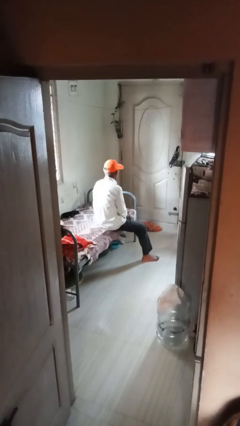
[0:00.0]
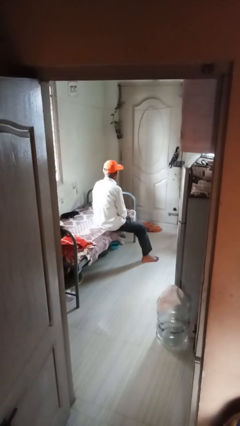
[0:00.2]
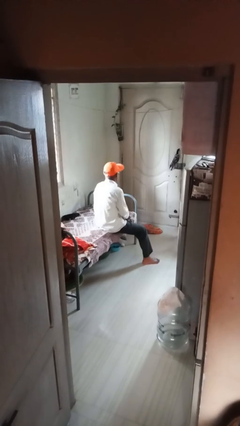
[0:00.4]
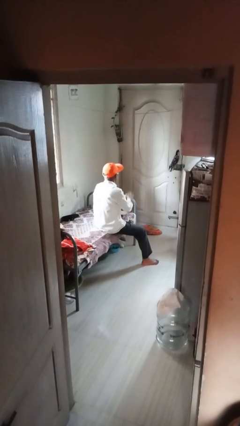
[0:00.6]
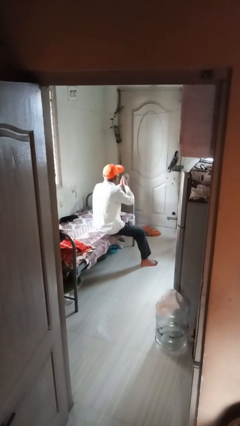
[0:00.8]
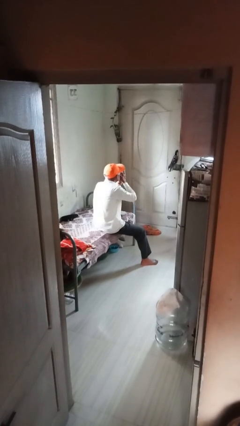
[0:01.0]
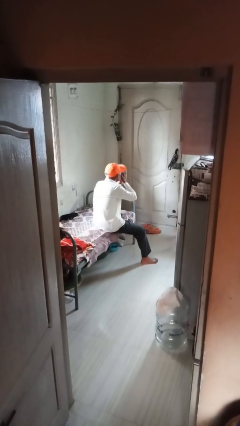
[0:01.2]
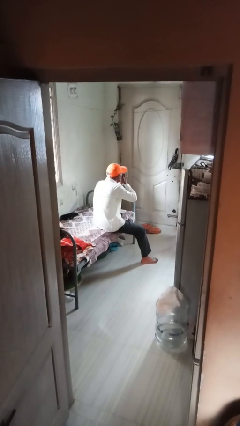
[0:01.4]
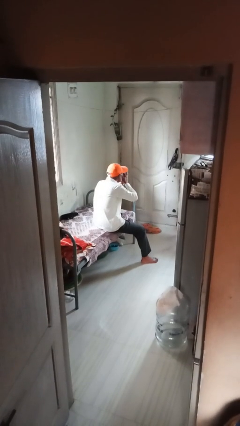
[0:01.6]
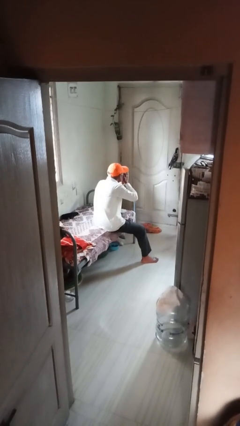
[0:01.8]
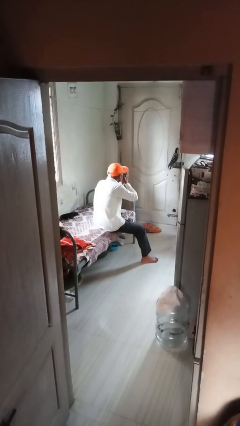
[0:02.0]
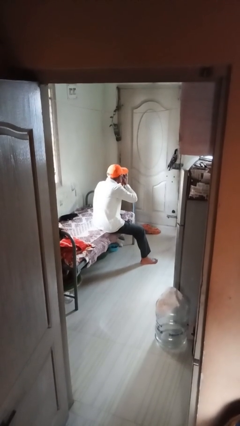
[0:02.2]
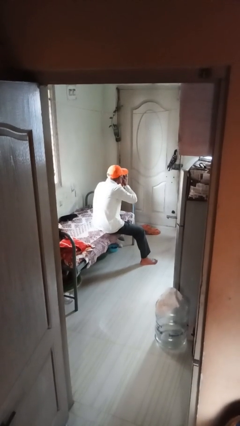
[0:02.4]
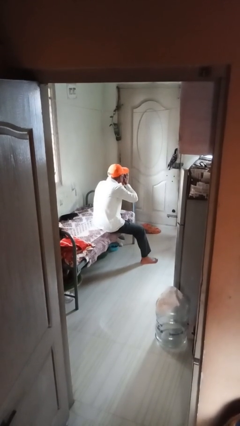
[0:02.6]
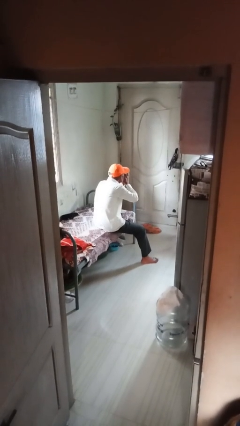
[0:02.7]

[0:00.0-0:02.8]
person prays

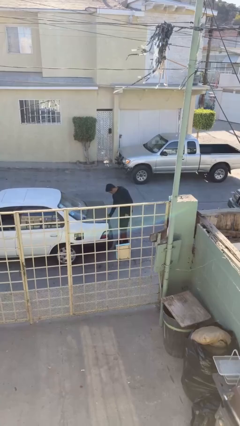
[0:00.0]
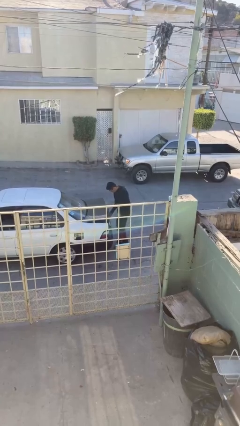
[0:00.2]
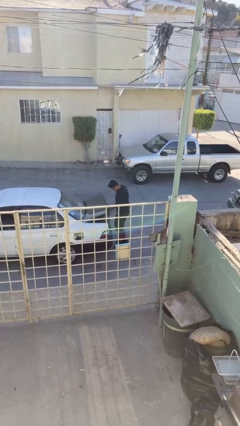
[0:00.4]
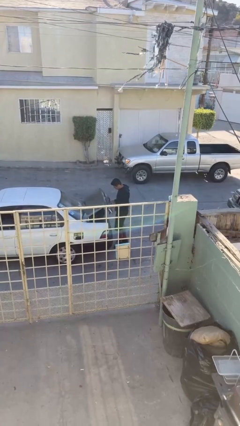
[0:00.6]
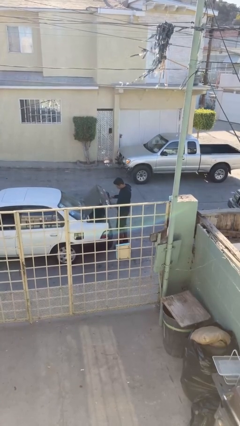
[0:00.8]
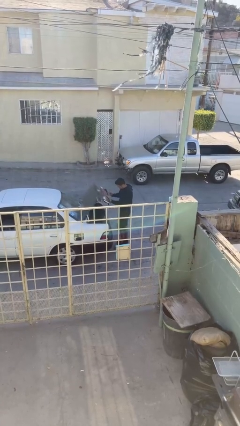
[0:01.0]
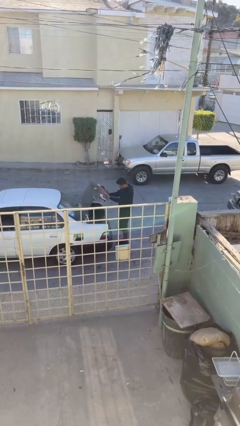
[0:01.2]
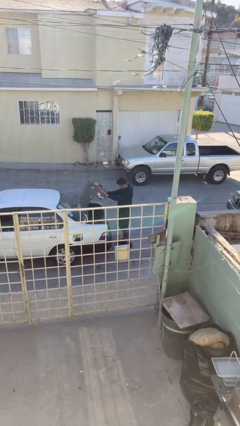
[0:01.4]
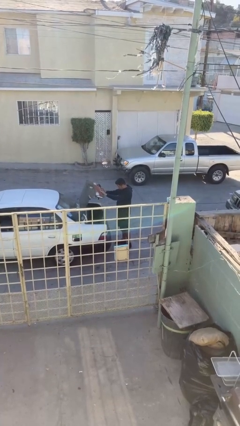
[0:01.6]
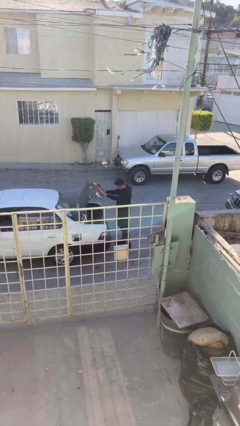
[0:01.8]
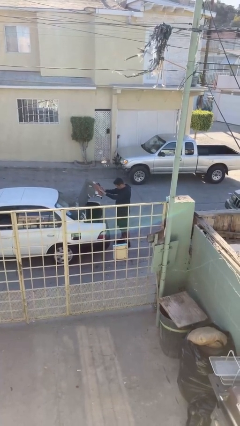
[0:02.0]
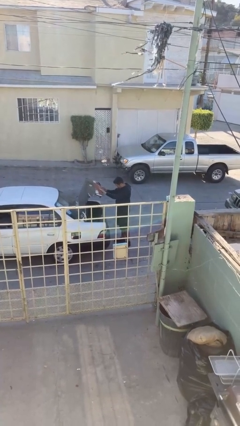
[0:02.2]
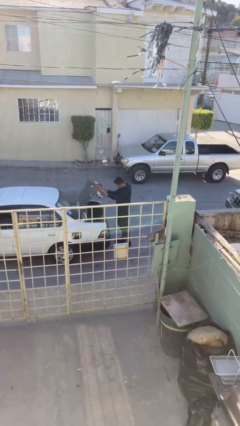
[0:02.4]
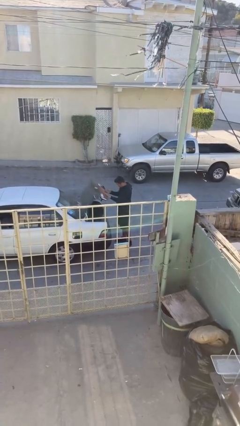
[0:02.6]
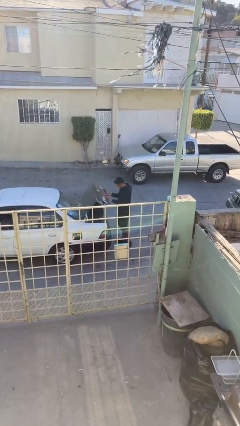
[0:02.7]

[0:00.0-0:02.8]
person opens car trunk

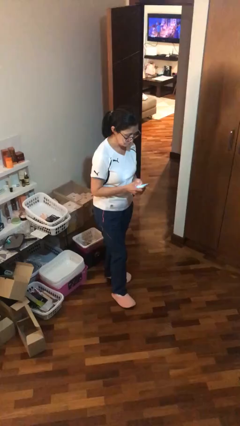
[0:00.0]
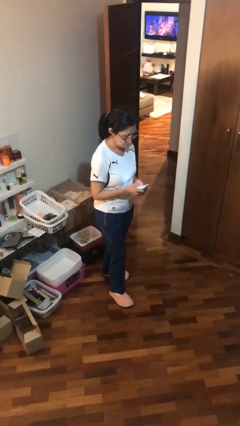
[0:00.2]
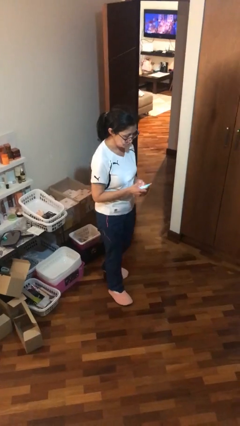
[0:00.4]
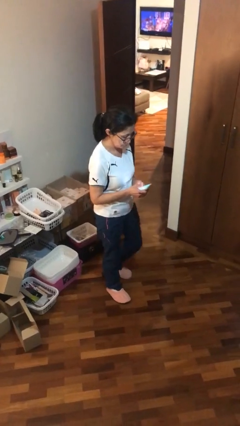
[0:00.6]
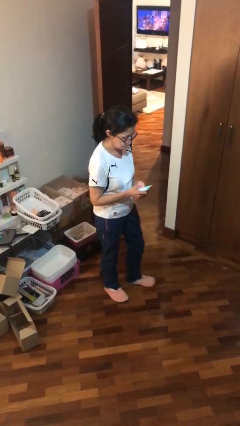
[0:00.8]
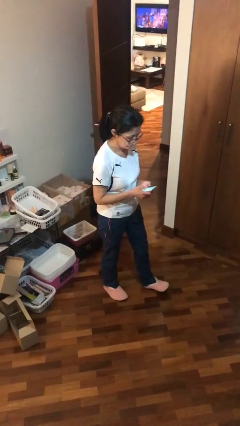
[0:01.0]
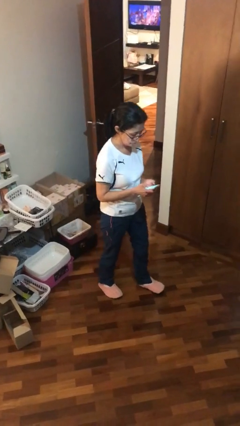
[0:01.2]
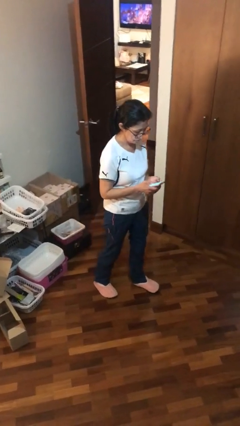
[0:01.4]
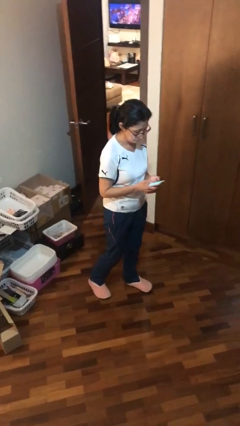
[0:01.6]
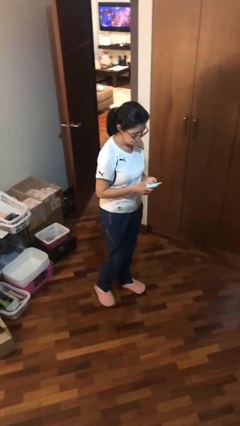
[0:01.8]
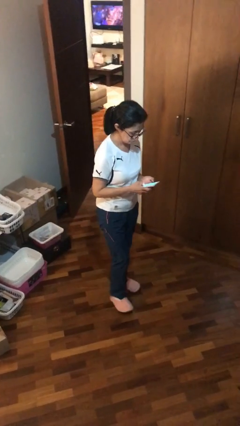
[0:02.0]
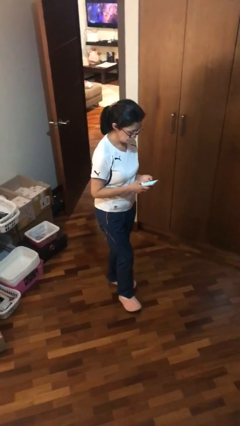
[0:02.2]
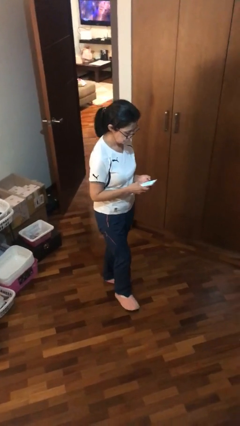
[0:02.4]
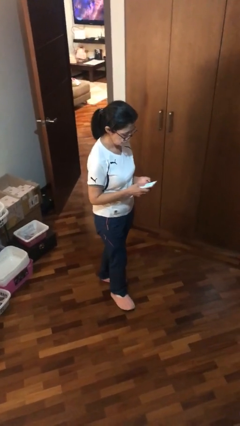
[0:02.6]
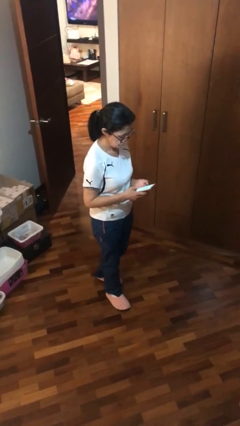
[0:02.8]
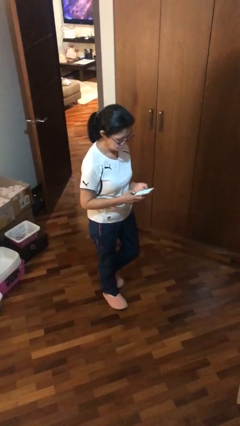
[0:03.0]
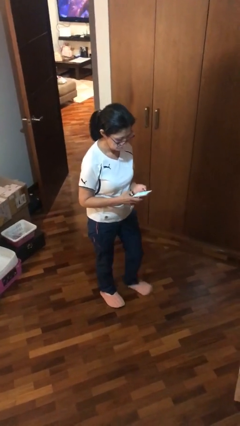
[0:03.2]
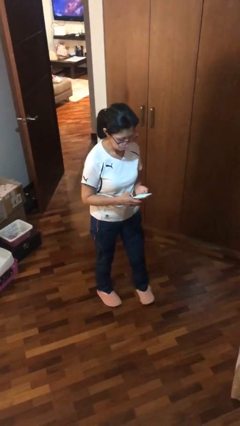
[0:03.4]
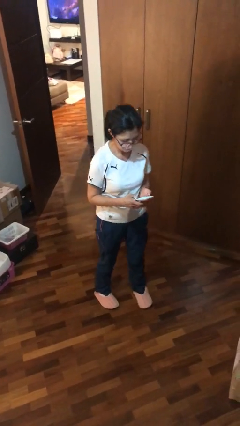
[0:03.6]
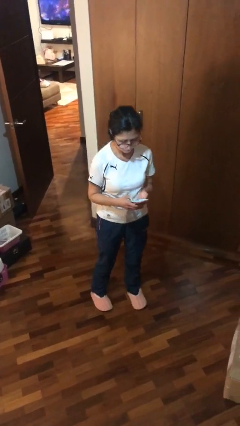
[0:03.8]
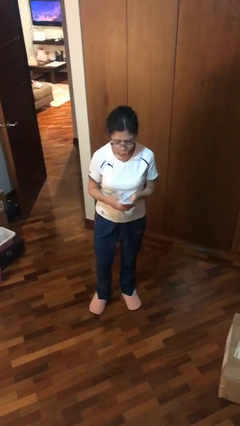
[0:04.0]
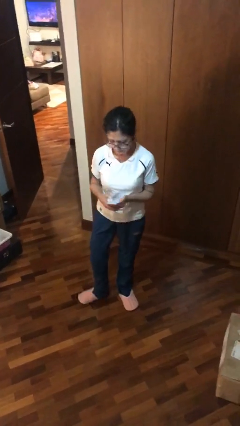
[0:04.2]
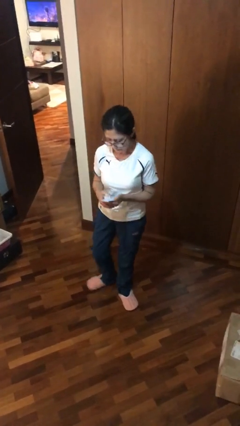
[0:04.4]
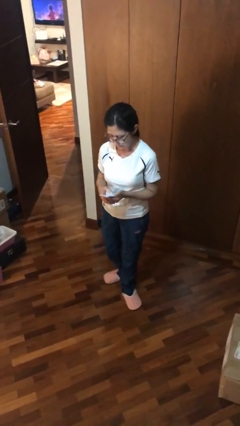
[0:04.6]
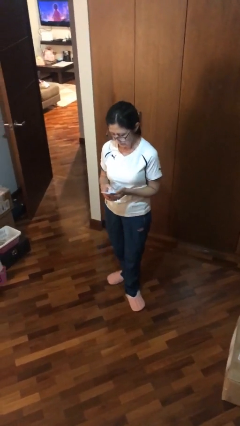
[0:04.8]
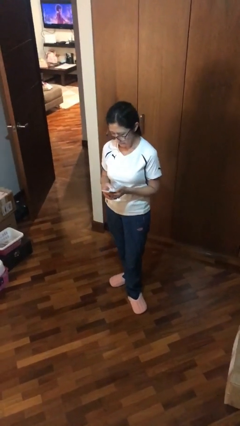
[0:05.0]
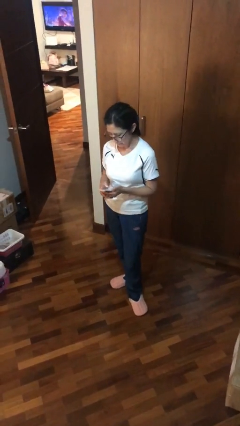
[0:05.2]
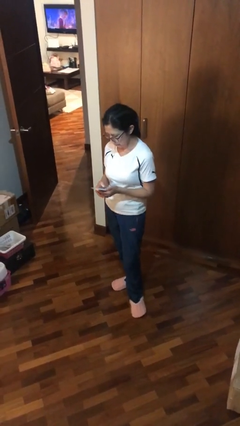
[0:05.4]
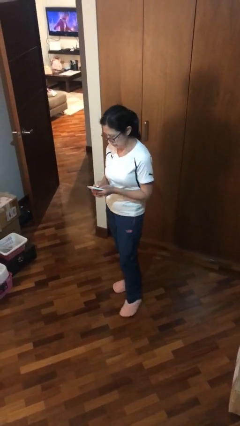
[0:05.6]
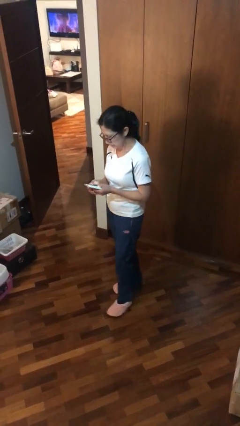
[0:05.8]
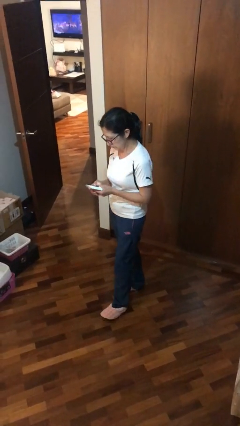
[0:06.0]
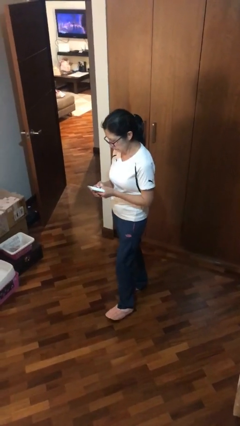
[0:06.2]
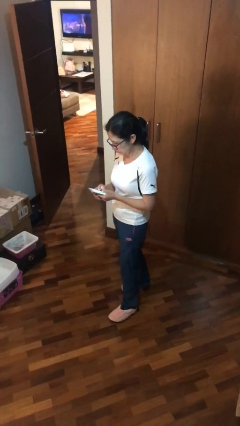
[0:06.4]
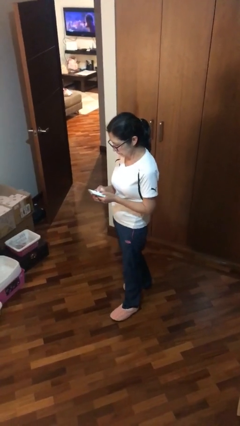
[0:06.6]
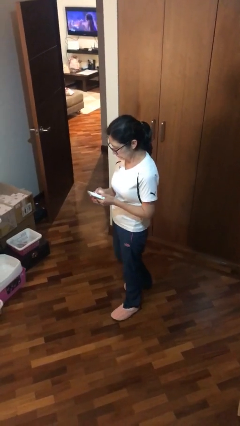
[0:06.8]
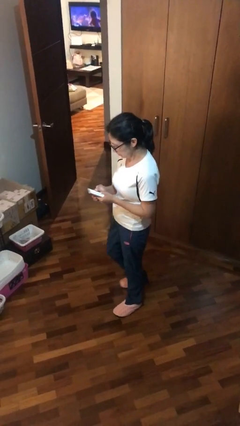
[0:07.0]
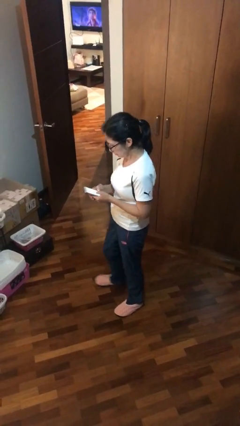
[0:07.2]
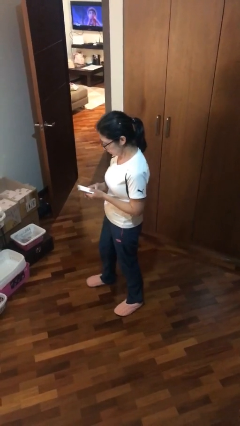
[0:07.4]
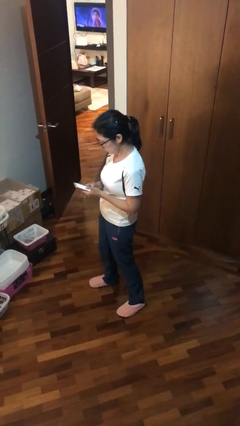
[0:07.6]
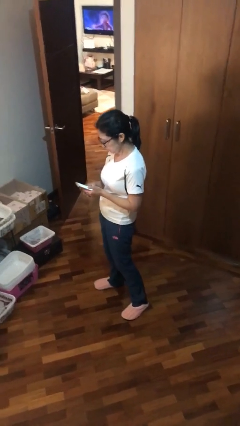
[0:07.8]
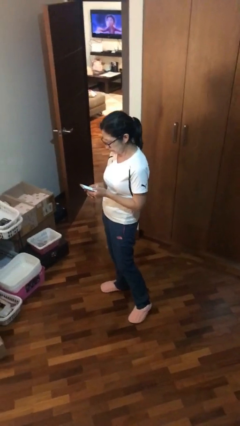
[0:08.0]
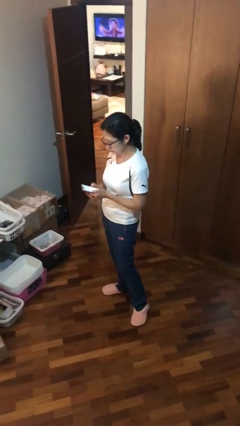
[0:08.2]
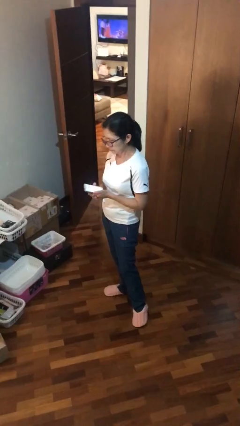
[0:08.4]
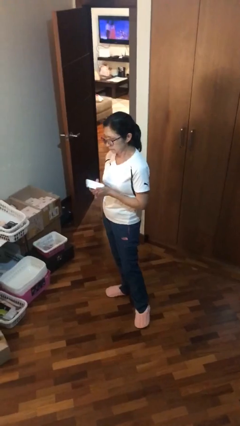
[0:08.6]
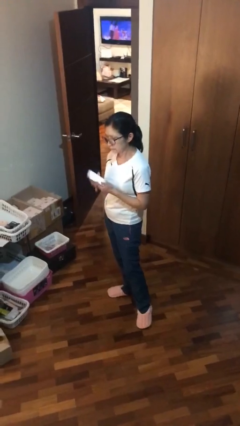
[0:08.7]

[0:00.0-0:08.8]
person texts on phone

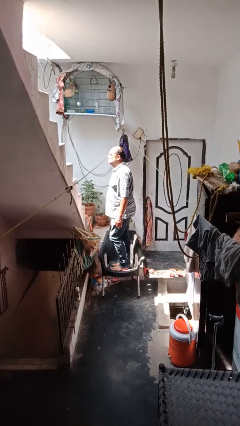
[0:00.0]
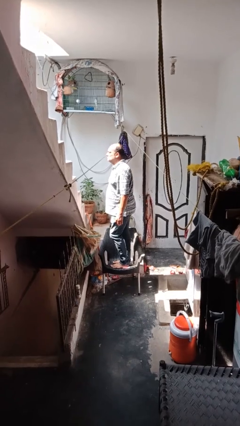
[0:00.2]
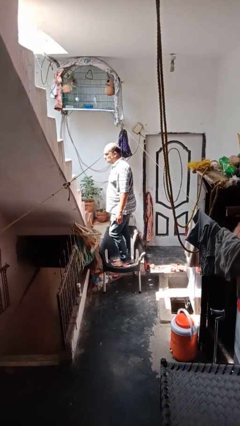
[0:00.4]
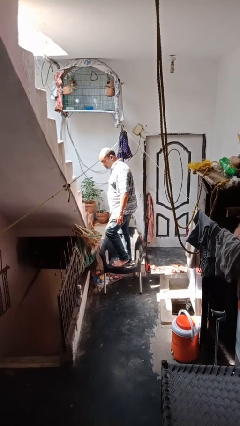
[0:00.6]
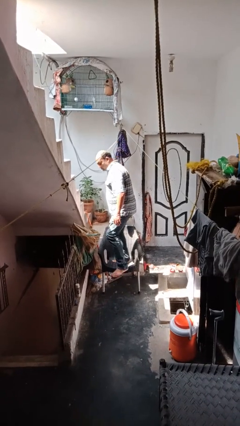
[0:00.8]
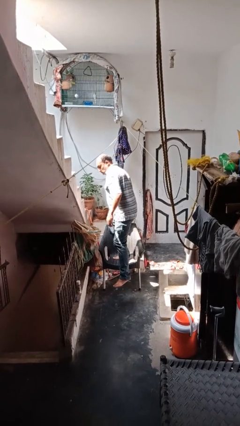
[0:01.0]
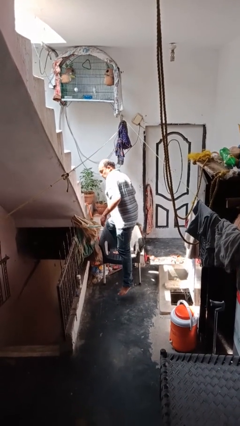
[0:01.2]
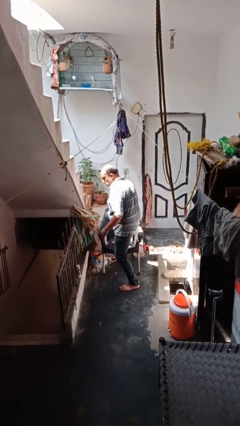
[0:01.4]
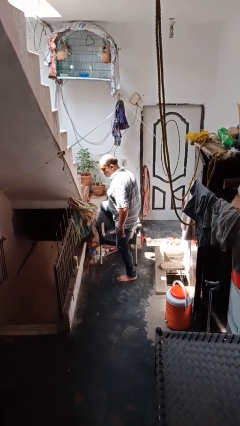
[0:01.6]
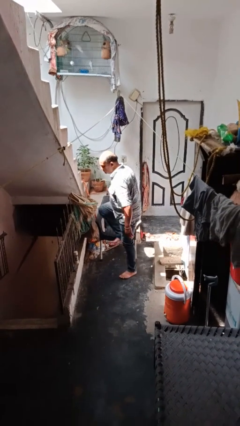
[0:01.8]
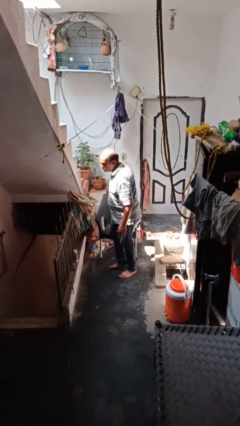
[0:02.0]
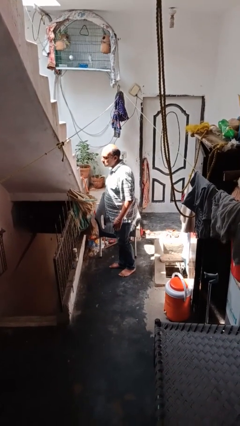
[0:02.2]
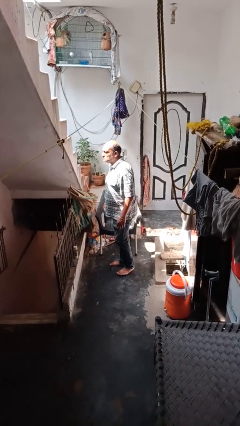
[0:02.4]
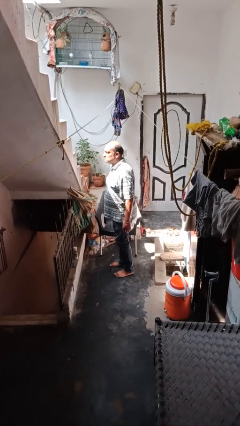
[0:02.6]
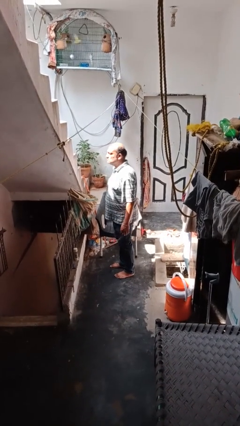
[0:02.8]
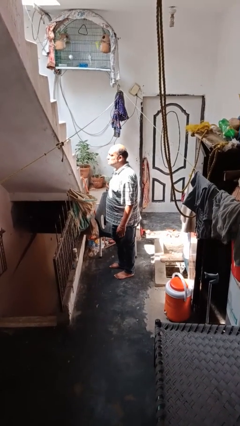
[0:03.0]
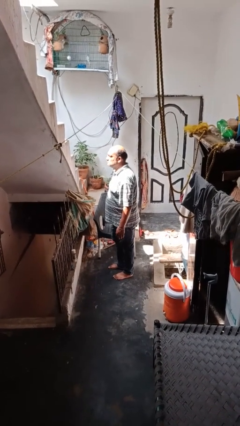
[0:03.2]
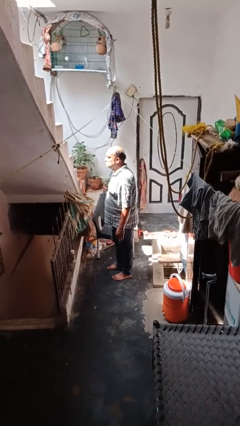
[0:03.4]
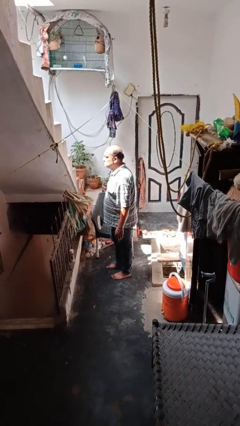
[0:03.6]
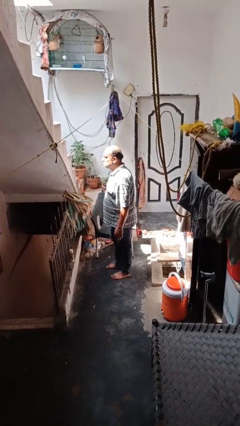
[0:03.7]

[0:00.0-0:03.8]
person climbs off chair
